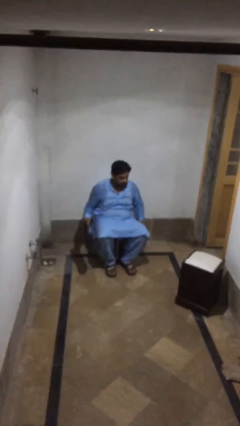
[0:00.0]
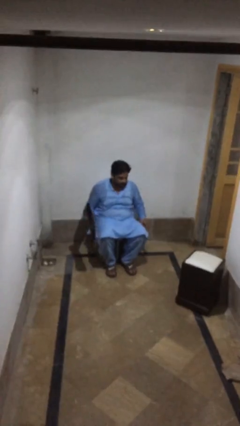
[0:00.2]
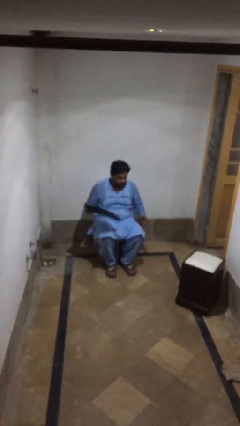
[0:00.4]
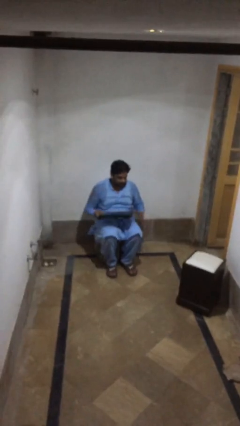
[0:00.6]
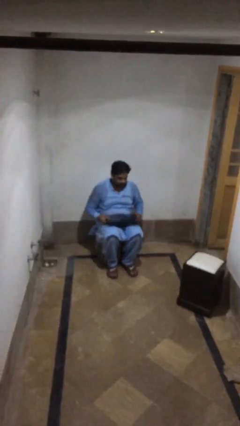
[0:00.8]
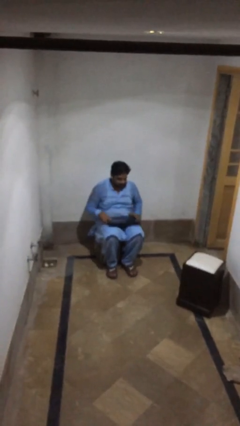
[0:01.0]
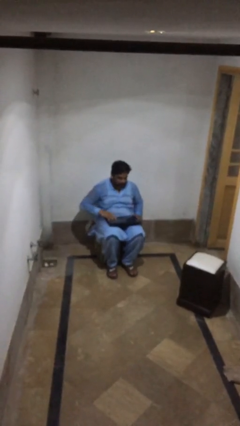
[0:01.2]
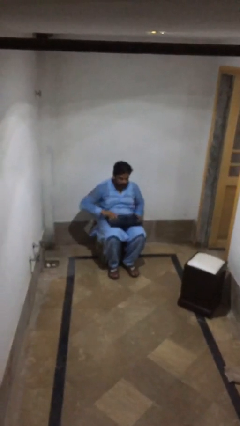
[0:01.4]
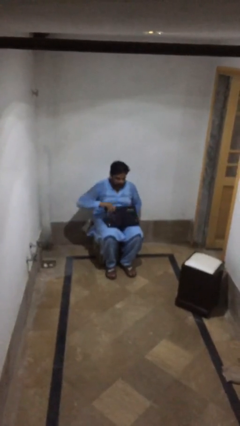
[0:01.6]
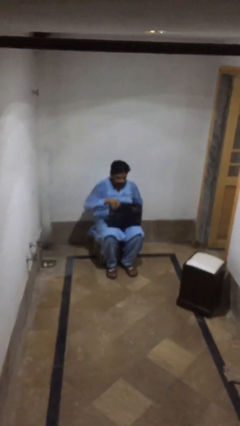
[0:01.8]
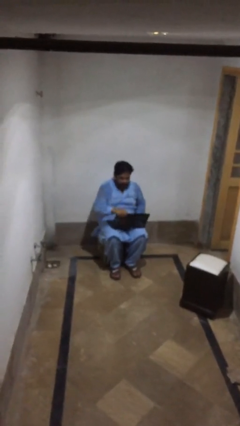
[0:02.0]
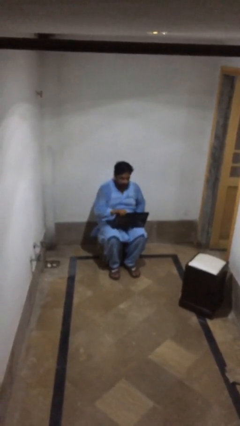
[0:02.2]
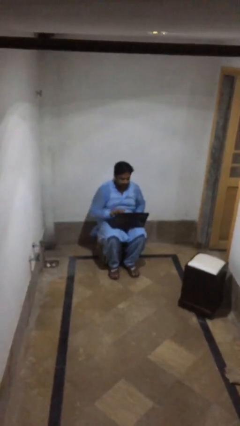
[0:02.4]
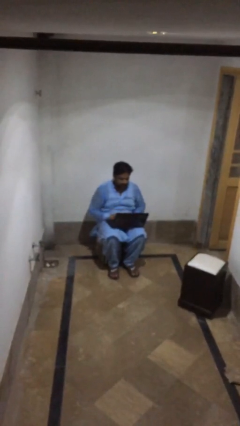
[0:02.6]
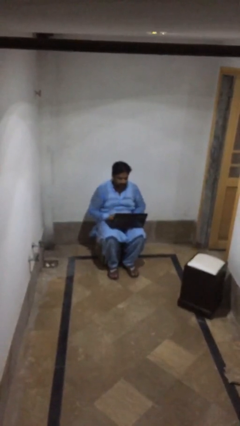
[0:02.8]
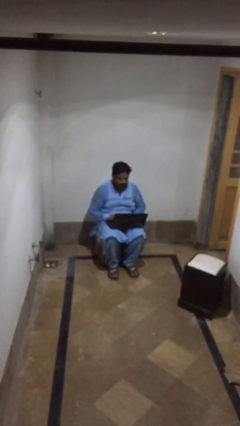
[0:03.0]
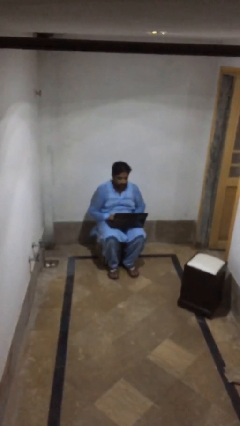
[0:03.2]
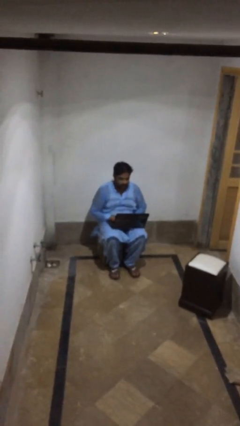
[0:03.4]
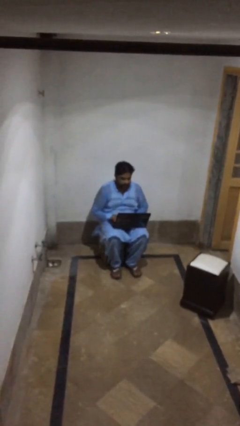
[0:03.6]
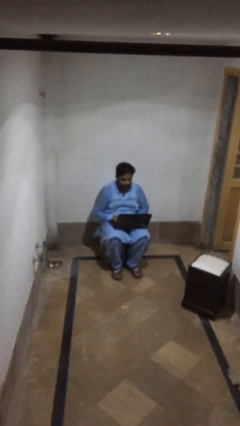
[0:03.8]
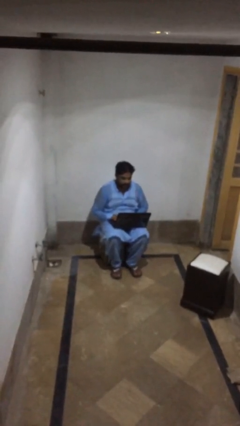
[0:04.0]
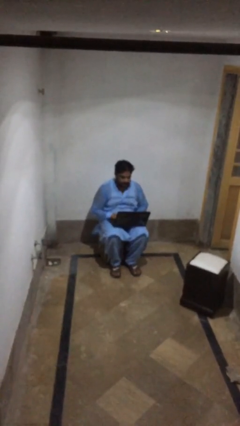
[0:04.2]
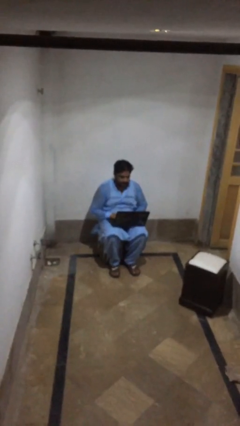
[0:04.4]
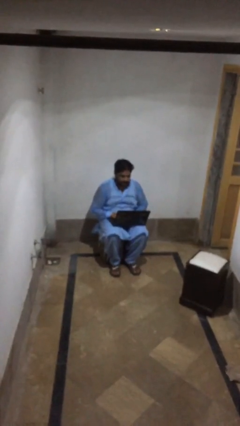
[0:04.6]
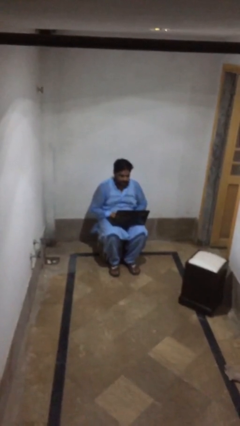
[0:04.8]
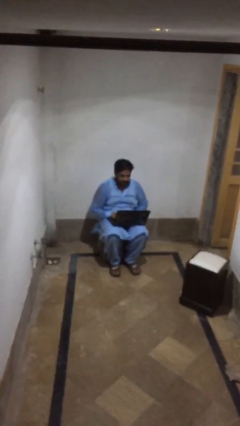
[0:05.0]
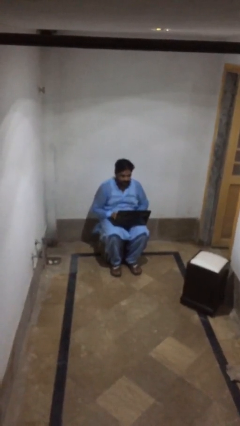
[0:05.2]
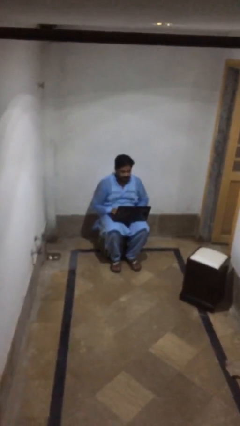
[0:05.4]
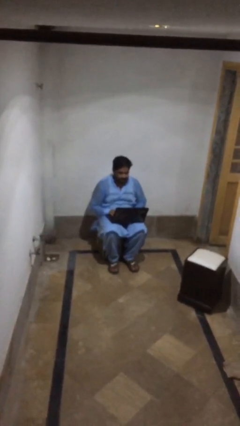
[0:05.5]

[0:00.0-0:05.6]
person interacts with laptop

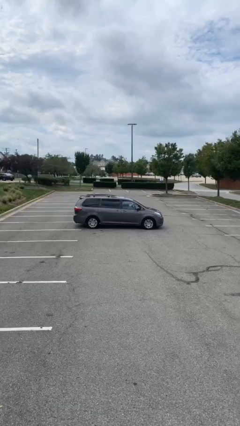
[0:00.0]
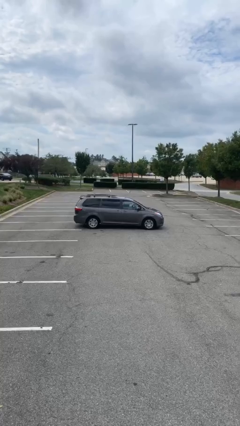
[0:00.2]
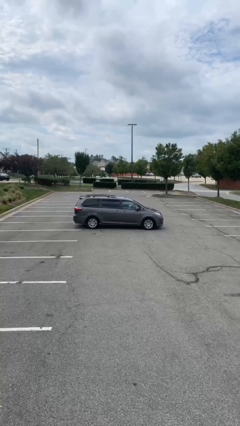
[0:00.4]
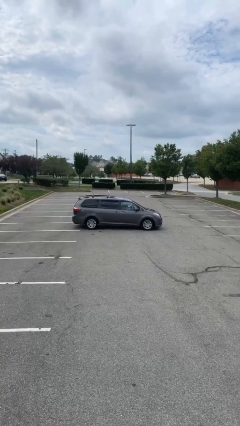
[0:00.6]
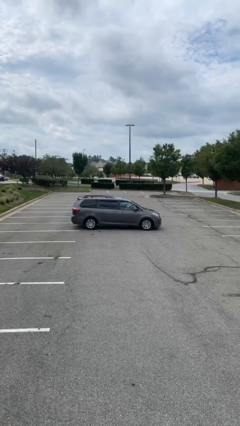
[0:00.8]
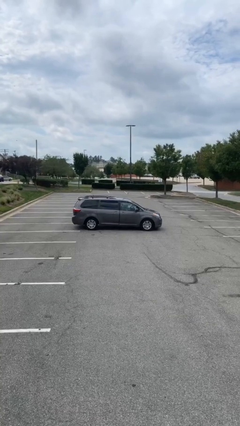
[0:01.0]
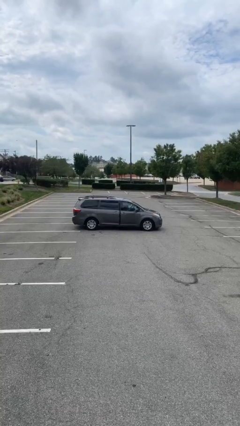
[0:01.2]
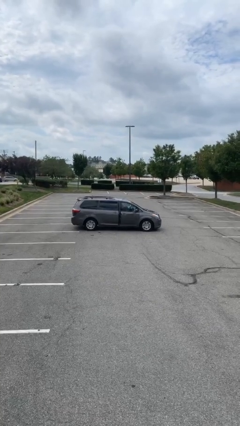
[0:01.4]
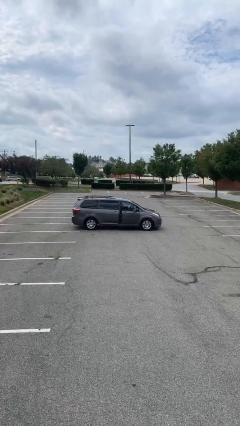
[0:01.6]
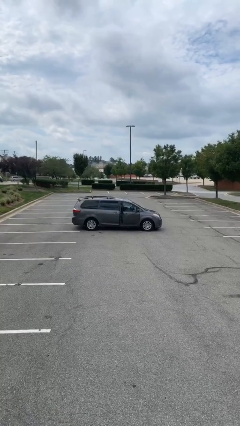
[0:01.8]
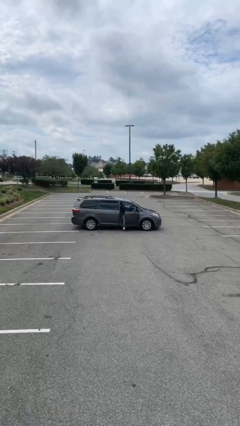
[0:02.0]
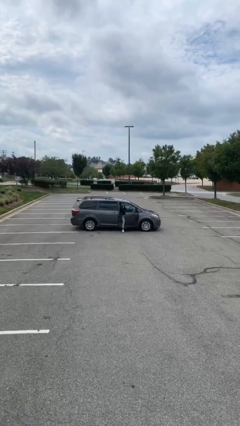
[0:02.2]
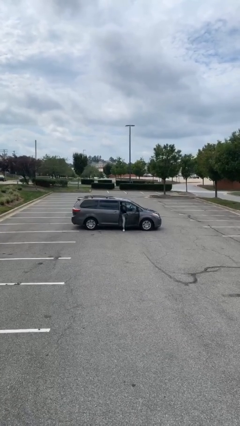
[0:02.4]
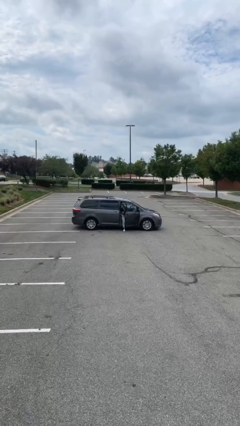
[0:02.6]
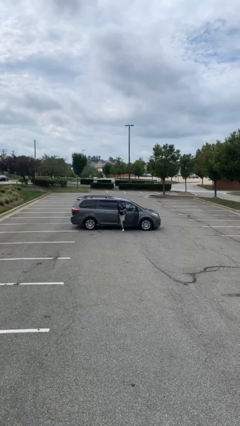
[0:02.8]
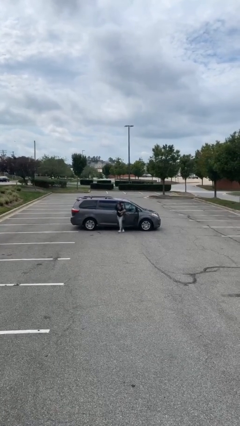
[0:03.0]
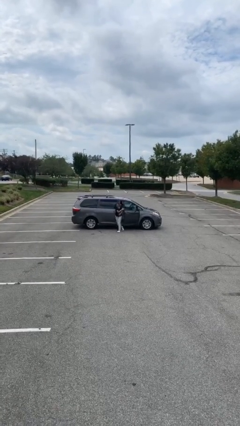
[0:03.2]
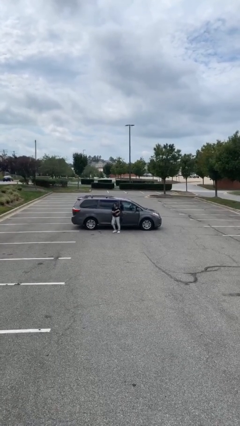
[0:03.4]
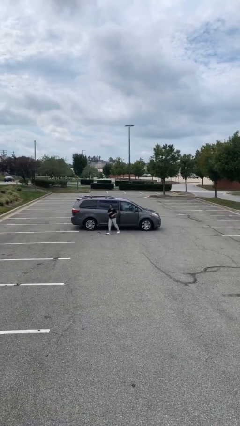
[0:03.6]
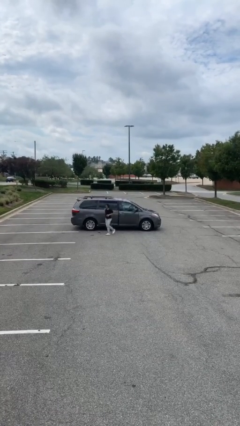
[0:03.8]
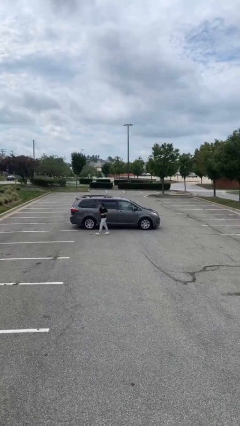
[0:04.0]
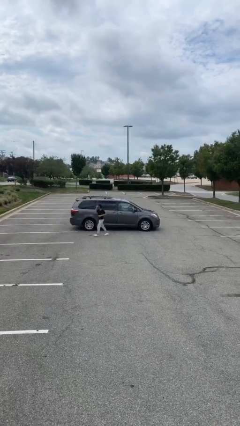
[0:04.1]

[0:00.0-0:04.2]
car drops off person

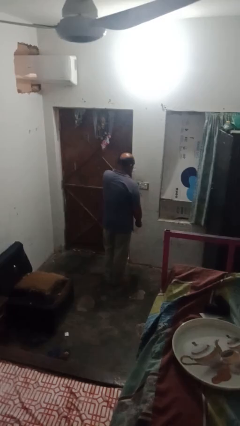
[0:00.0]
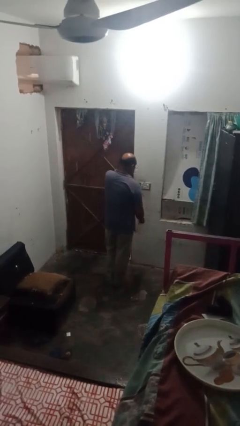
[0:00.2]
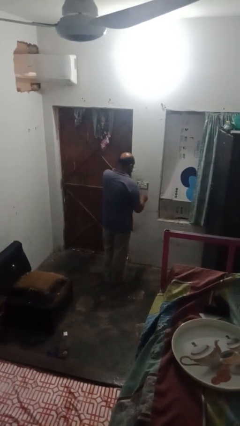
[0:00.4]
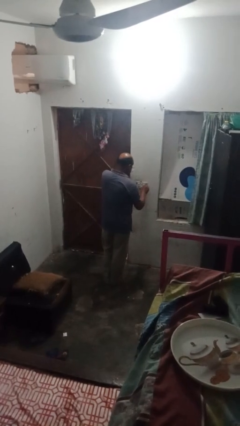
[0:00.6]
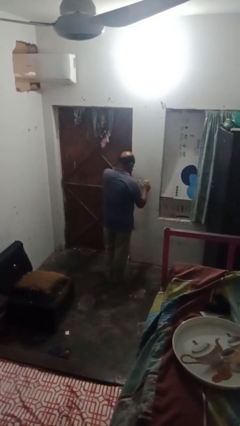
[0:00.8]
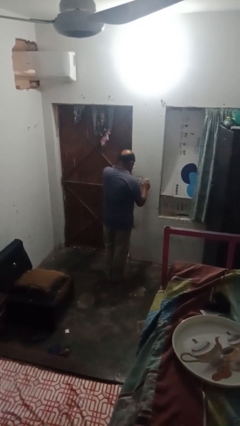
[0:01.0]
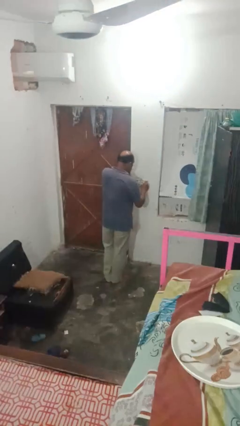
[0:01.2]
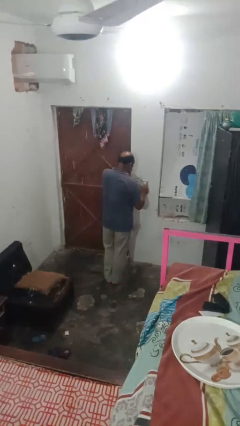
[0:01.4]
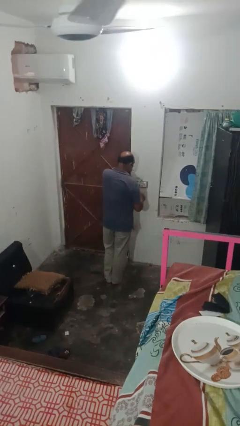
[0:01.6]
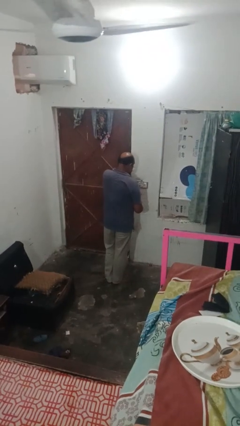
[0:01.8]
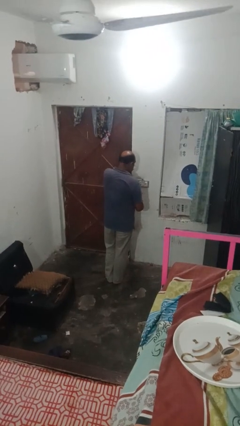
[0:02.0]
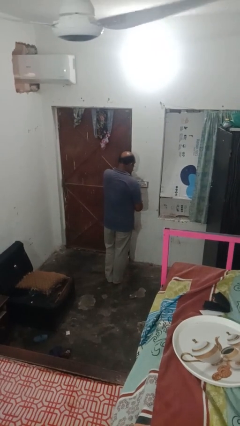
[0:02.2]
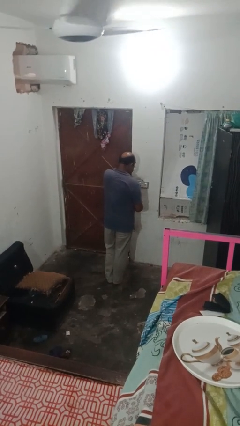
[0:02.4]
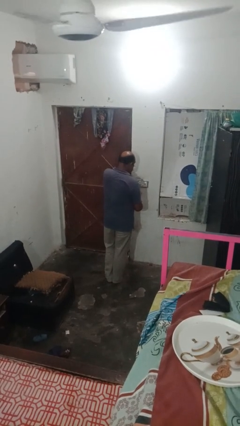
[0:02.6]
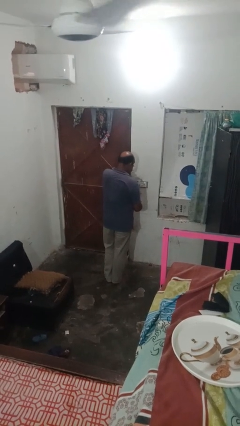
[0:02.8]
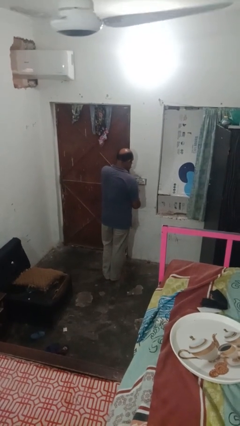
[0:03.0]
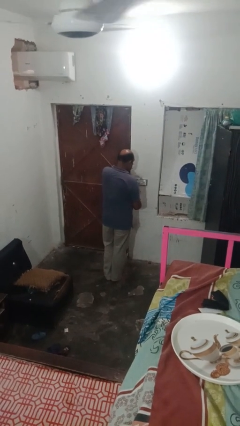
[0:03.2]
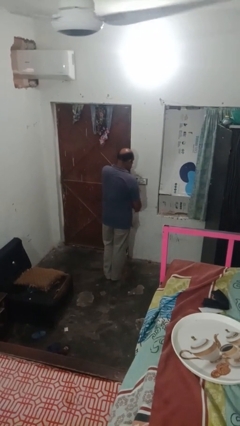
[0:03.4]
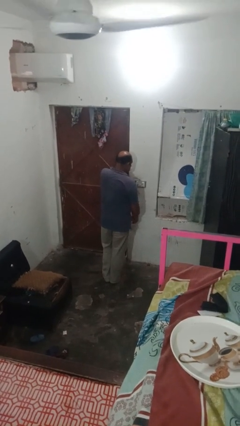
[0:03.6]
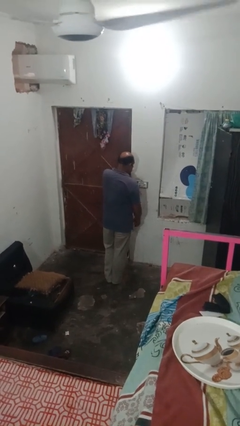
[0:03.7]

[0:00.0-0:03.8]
person turns on fan

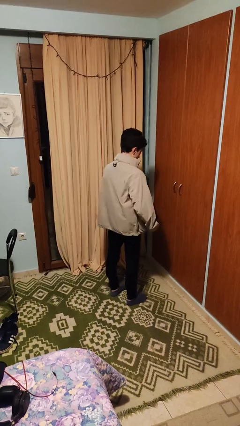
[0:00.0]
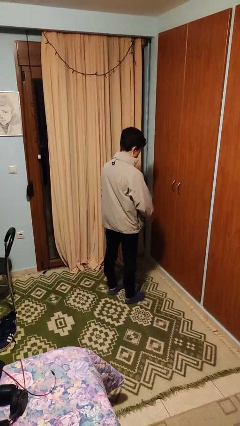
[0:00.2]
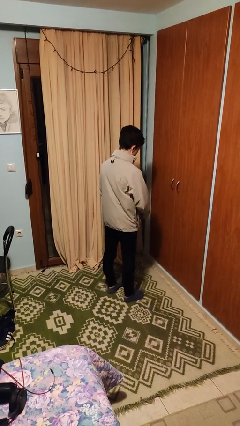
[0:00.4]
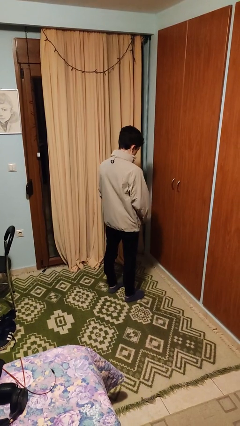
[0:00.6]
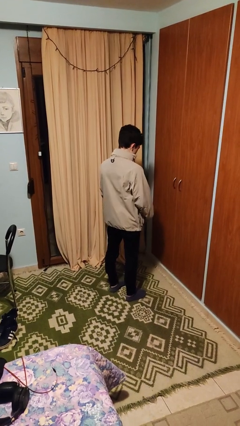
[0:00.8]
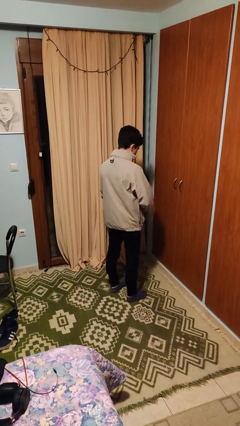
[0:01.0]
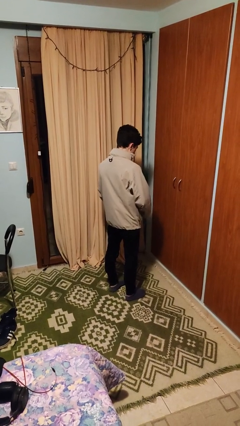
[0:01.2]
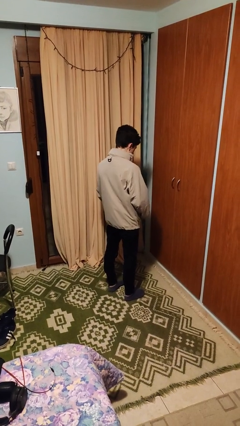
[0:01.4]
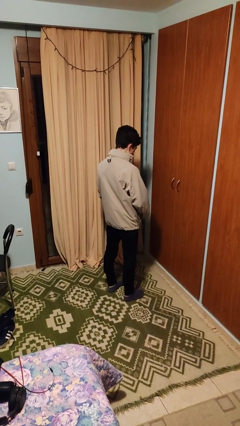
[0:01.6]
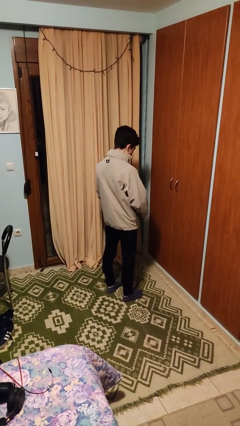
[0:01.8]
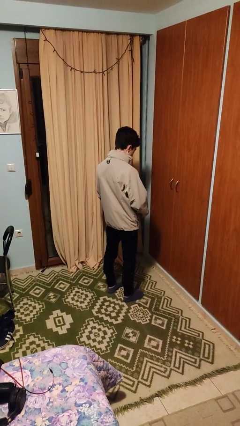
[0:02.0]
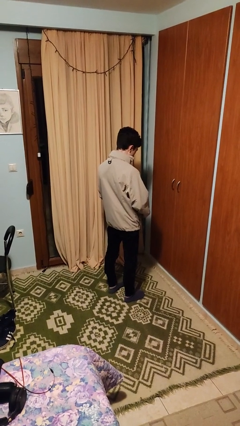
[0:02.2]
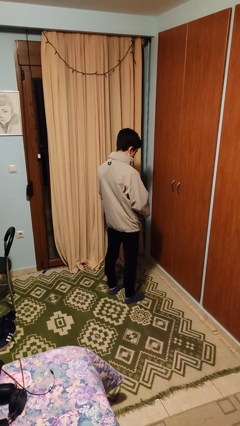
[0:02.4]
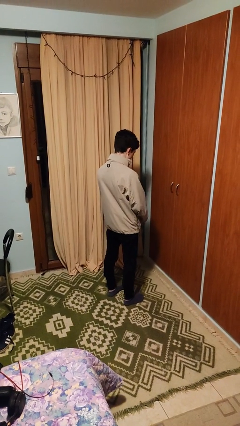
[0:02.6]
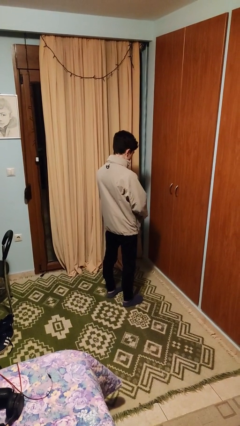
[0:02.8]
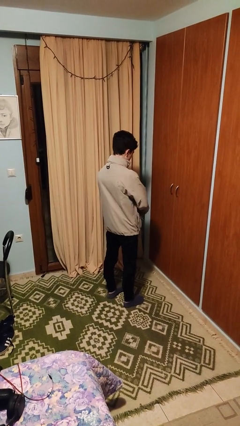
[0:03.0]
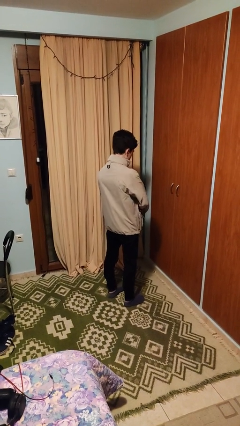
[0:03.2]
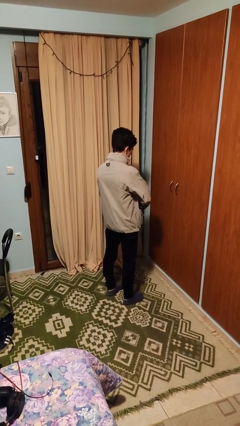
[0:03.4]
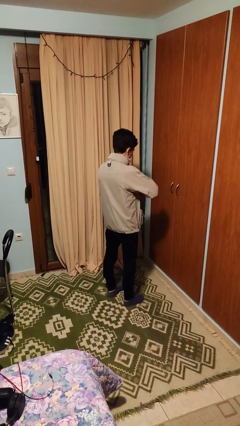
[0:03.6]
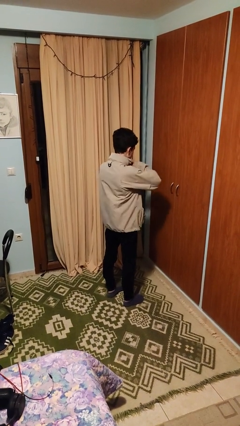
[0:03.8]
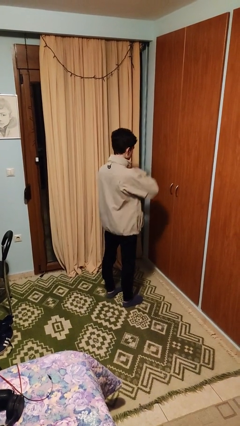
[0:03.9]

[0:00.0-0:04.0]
person zips up jacket
